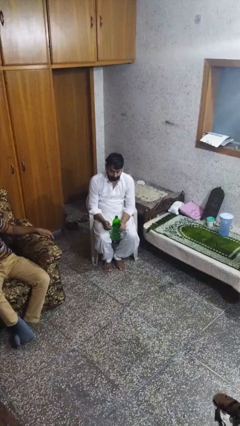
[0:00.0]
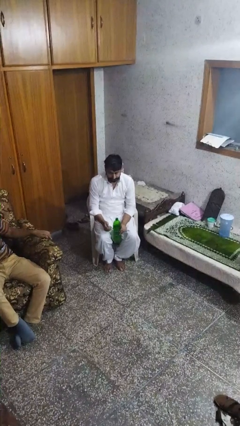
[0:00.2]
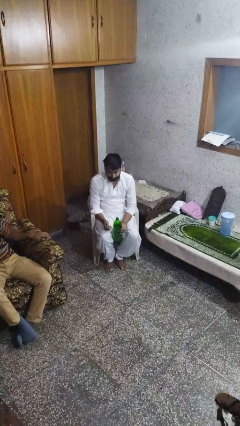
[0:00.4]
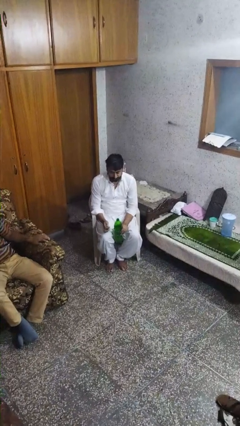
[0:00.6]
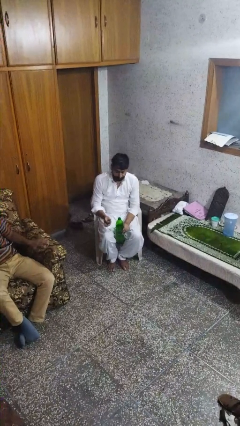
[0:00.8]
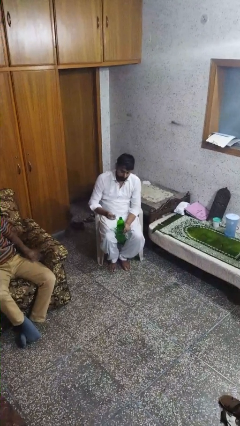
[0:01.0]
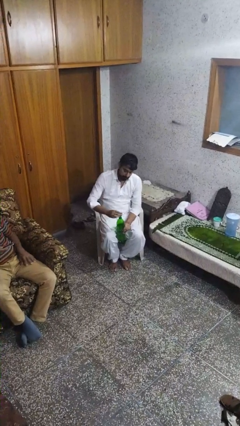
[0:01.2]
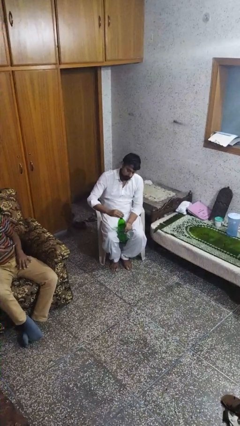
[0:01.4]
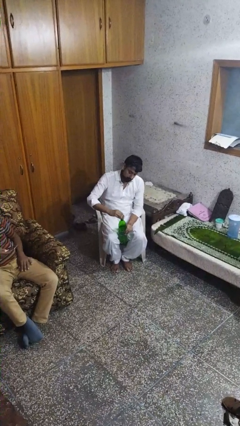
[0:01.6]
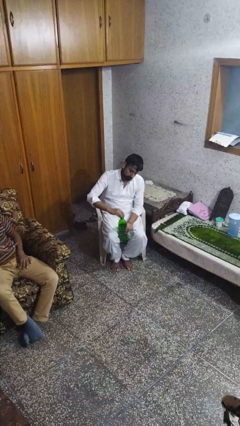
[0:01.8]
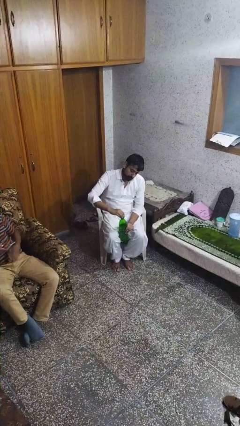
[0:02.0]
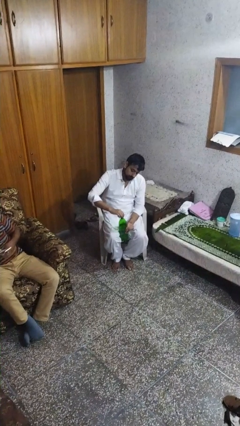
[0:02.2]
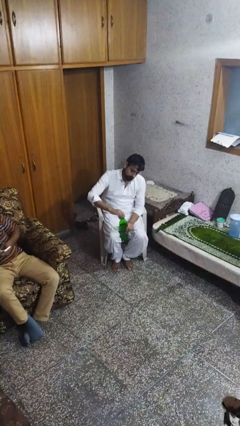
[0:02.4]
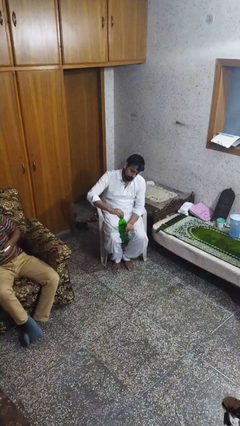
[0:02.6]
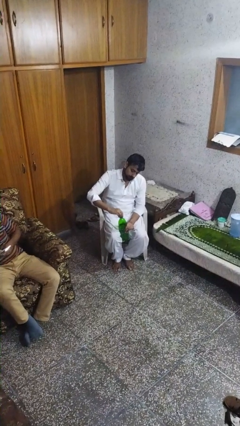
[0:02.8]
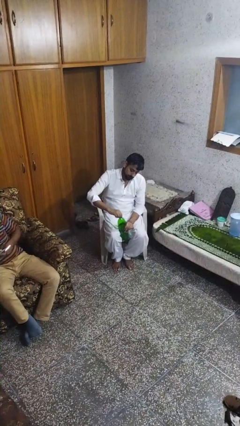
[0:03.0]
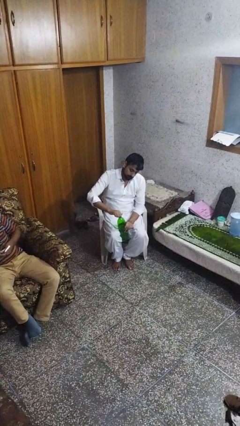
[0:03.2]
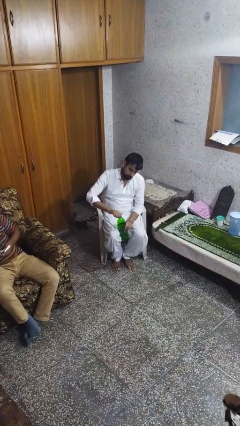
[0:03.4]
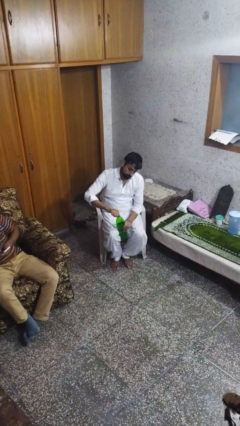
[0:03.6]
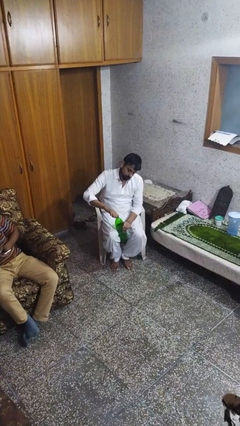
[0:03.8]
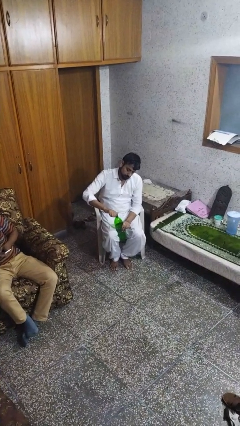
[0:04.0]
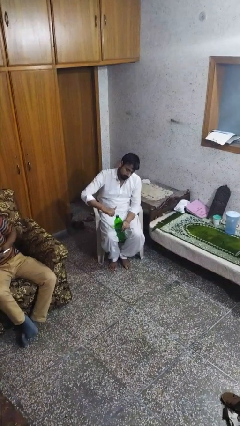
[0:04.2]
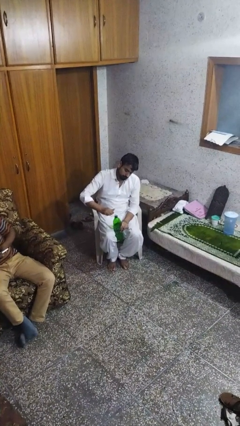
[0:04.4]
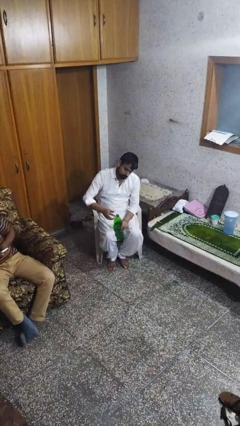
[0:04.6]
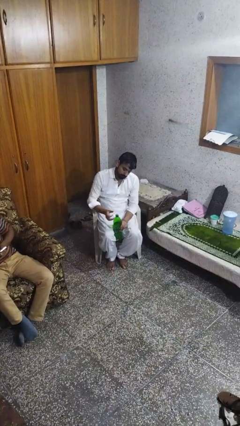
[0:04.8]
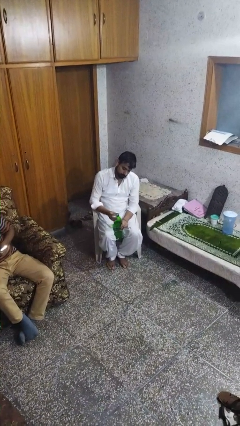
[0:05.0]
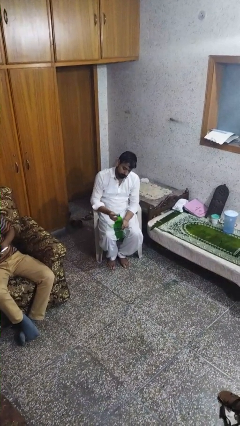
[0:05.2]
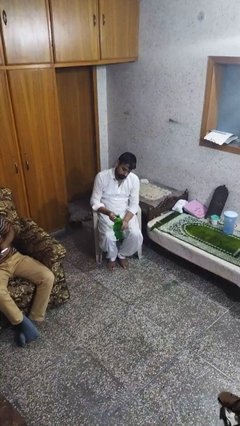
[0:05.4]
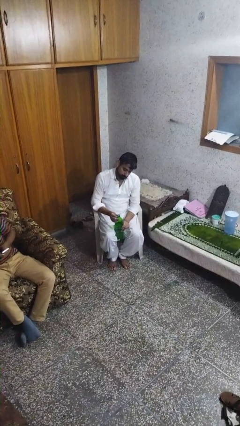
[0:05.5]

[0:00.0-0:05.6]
person screws lid to bottle

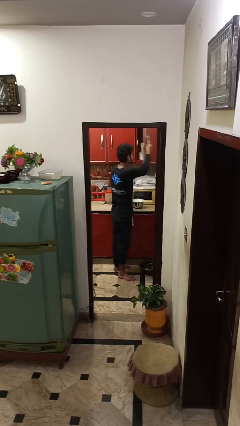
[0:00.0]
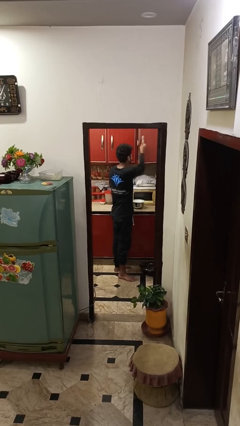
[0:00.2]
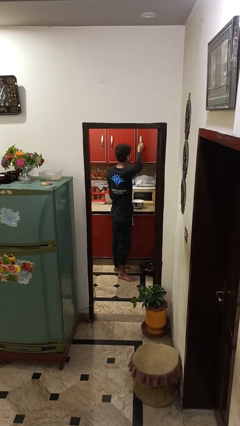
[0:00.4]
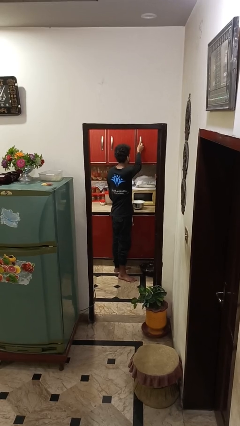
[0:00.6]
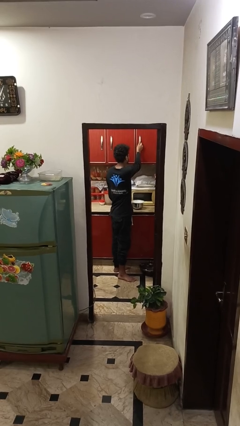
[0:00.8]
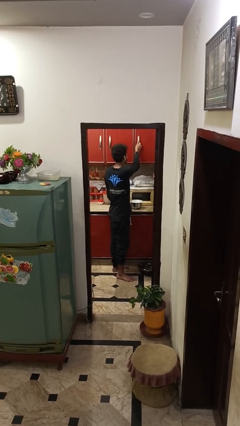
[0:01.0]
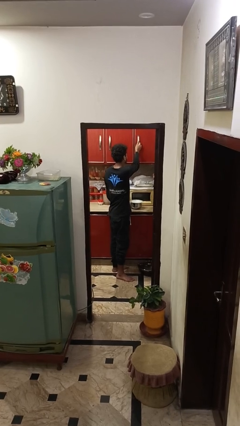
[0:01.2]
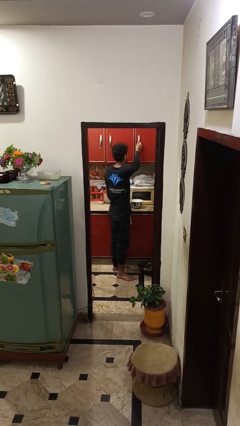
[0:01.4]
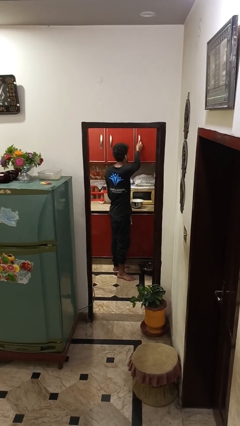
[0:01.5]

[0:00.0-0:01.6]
person closes cabinet

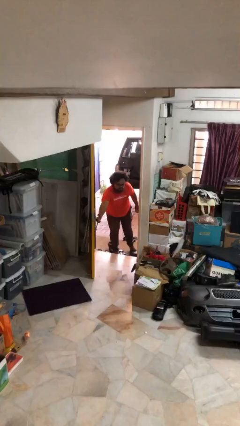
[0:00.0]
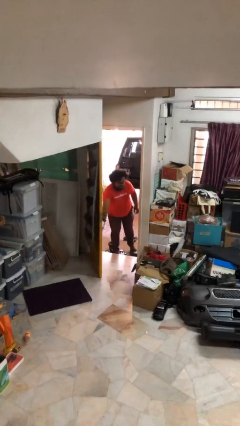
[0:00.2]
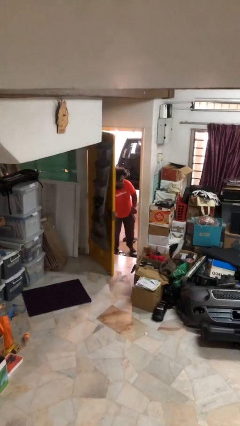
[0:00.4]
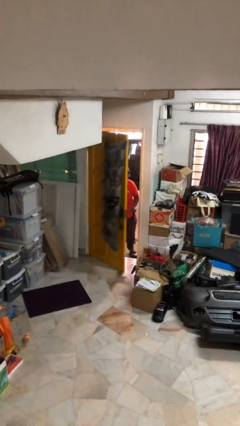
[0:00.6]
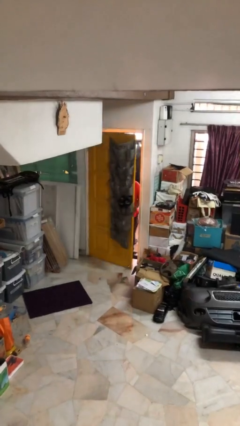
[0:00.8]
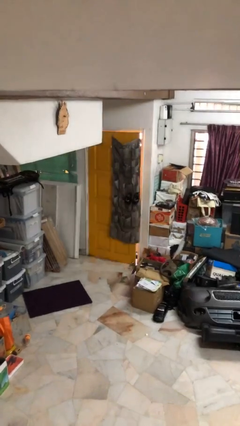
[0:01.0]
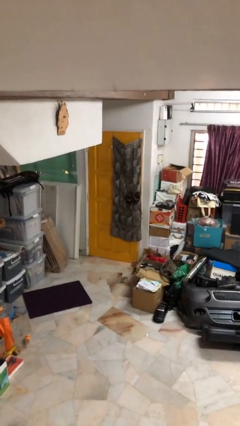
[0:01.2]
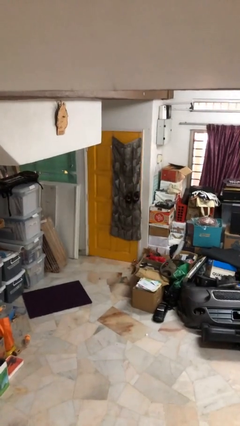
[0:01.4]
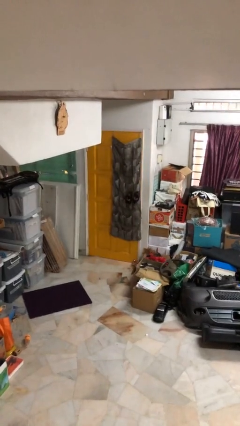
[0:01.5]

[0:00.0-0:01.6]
person closes facility door

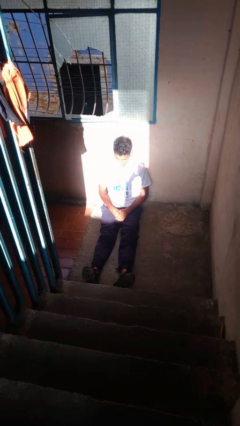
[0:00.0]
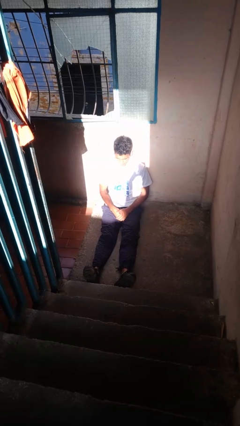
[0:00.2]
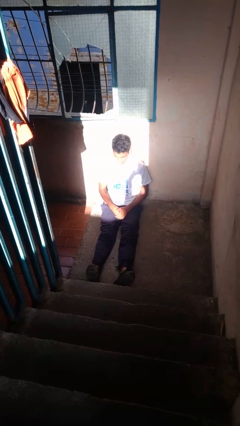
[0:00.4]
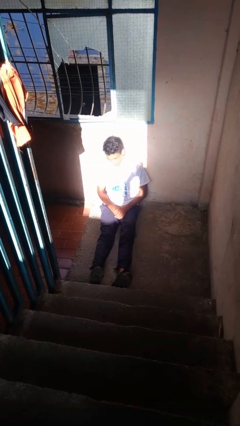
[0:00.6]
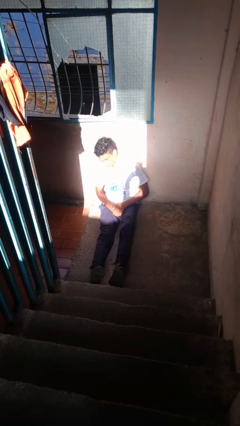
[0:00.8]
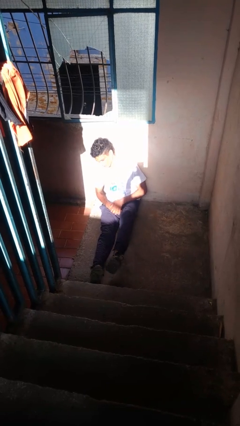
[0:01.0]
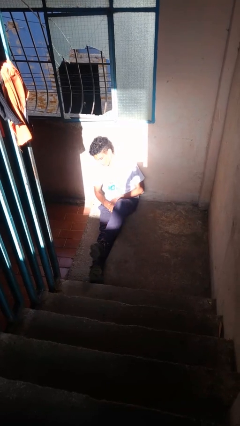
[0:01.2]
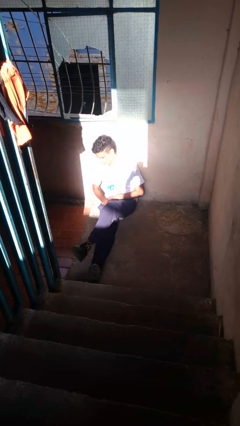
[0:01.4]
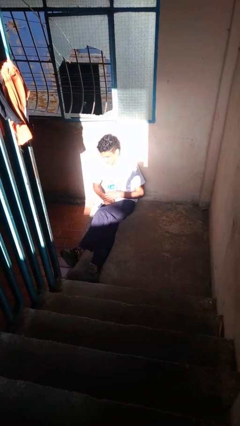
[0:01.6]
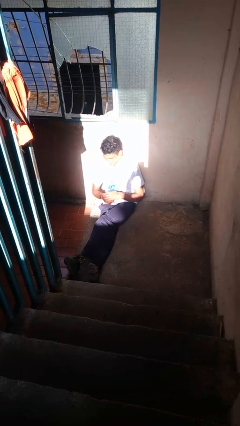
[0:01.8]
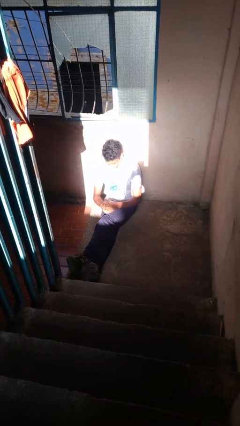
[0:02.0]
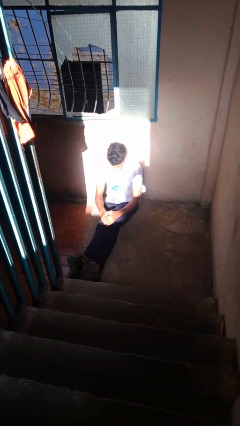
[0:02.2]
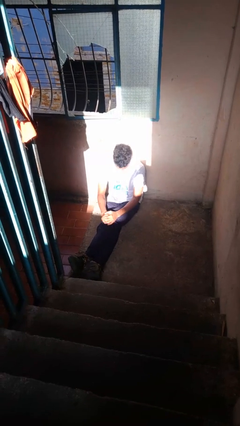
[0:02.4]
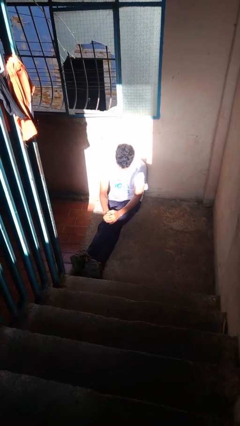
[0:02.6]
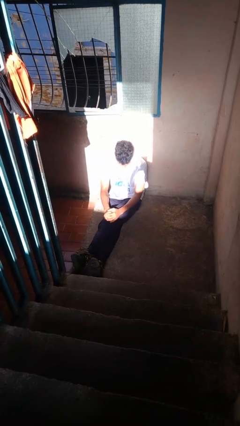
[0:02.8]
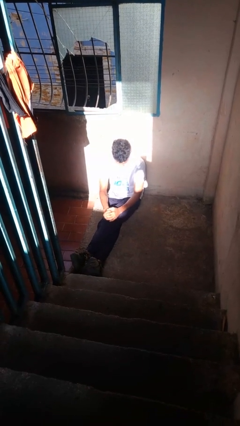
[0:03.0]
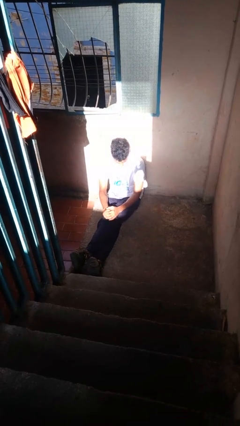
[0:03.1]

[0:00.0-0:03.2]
person crosses legs

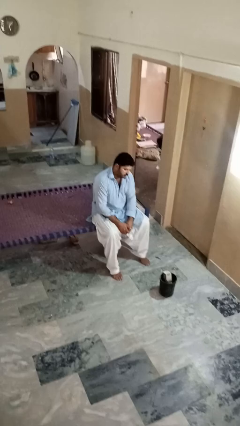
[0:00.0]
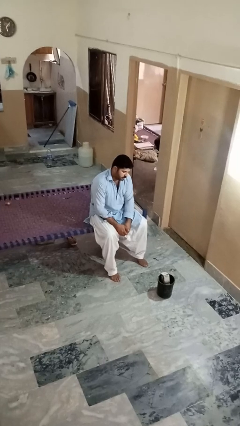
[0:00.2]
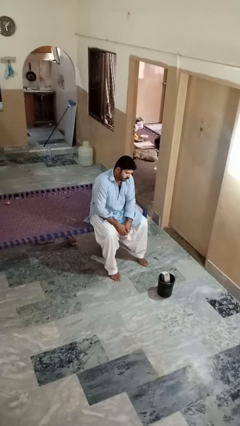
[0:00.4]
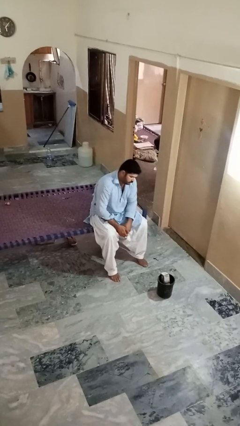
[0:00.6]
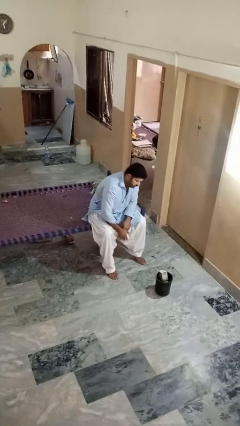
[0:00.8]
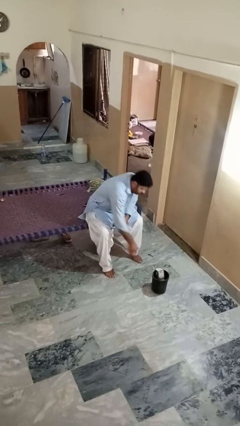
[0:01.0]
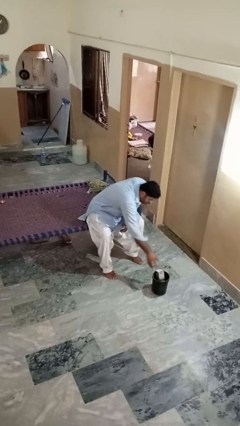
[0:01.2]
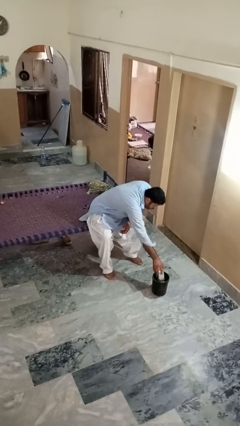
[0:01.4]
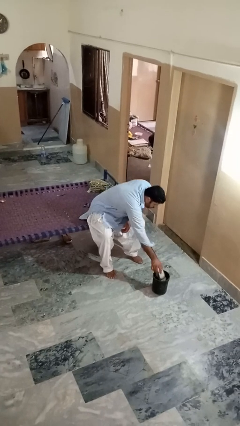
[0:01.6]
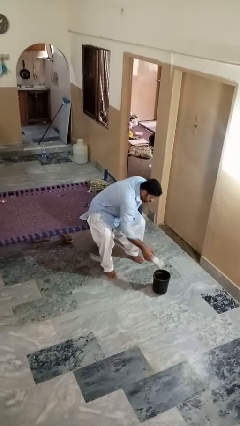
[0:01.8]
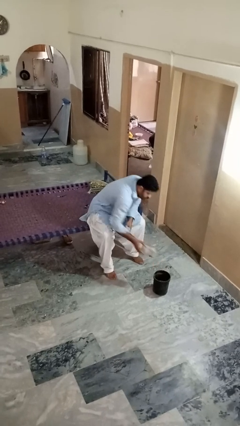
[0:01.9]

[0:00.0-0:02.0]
person takes object from basket

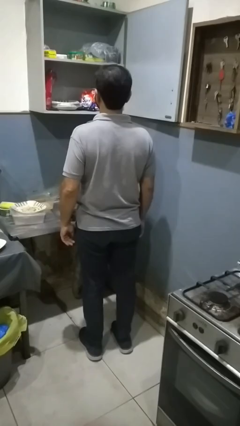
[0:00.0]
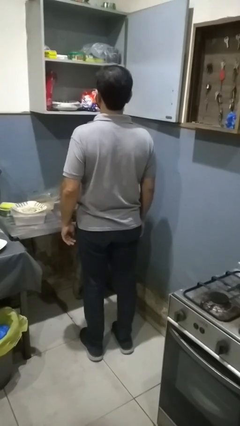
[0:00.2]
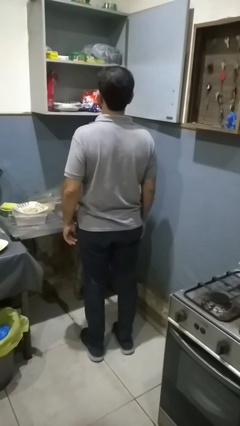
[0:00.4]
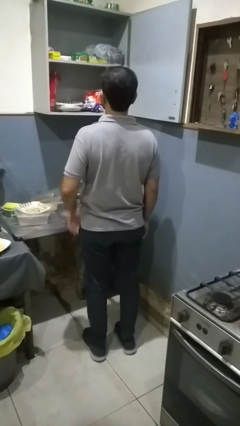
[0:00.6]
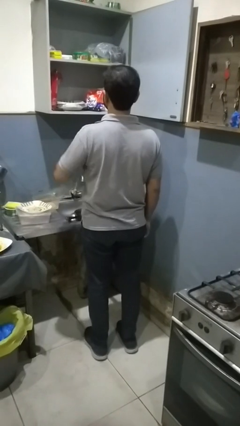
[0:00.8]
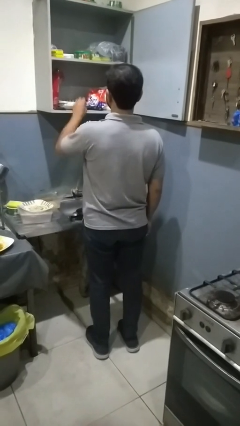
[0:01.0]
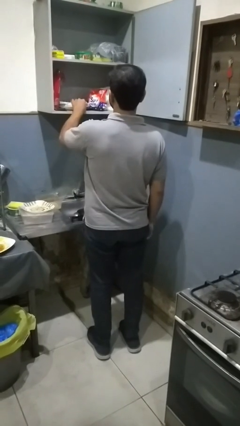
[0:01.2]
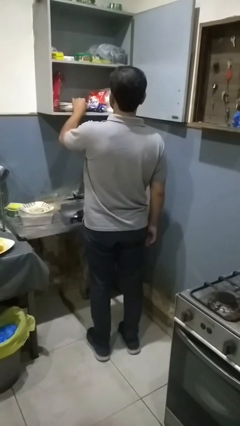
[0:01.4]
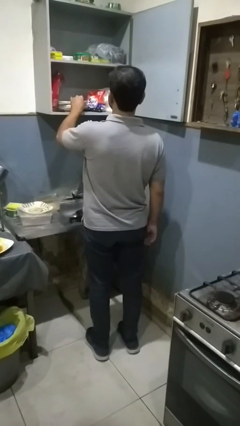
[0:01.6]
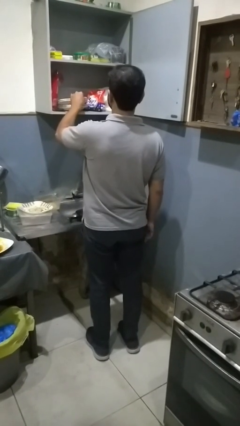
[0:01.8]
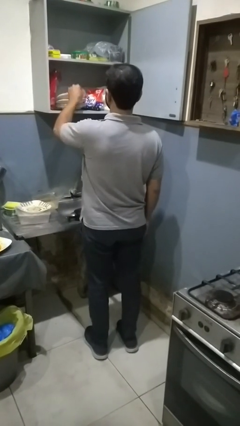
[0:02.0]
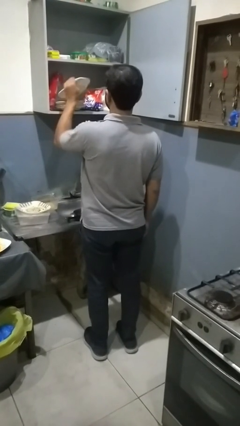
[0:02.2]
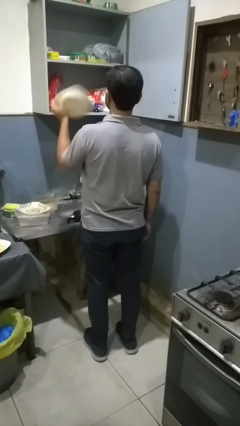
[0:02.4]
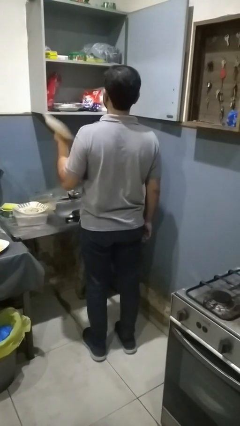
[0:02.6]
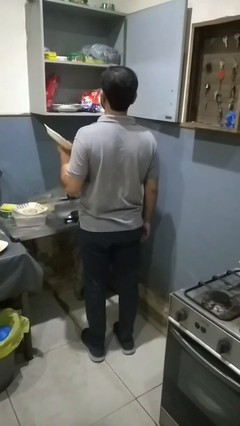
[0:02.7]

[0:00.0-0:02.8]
person takes object from cabinet

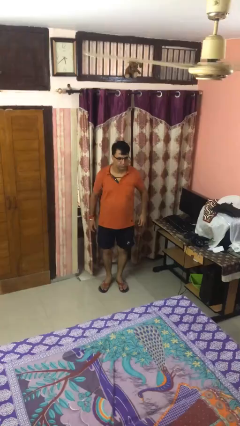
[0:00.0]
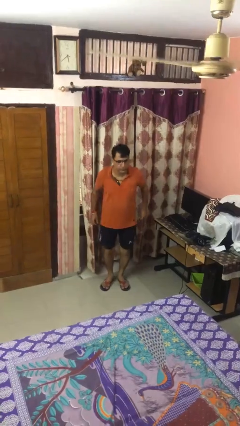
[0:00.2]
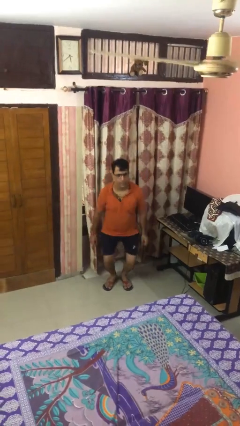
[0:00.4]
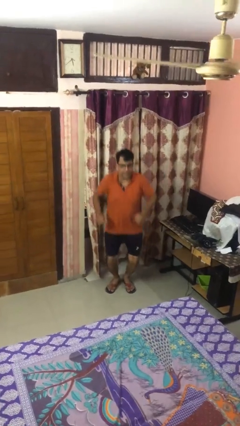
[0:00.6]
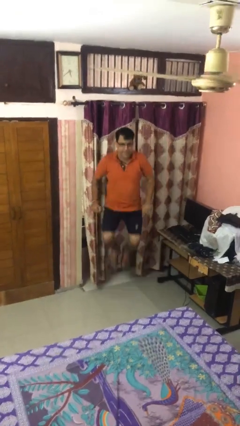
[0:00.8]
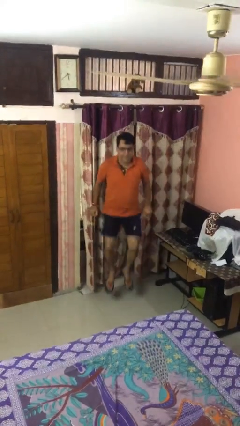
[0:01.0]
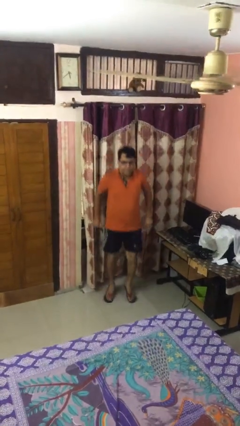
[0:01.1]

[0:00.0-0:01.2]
person jumps
